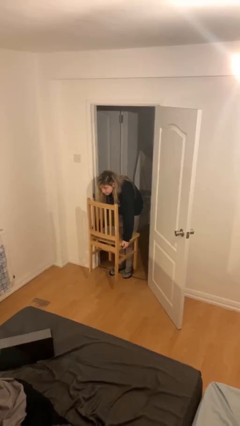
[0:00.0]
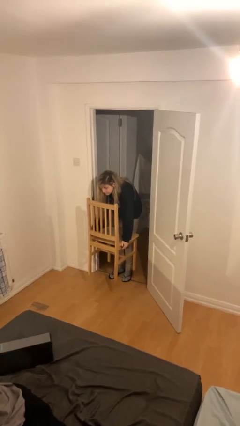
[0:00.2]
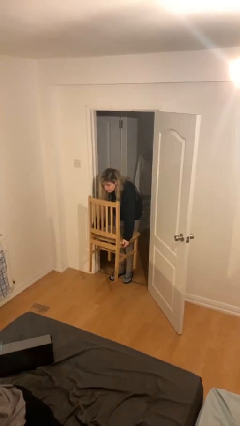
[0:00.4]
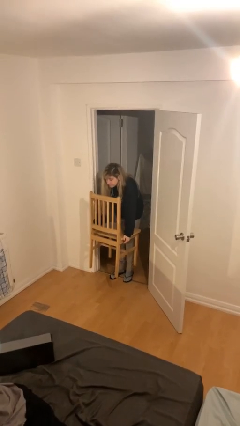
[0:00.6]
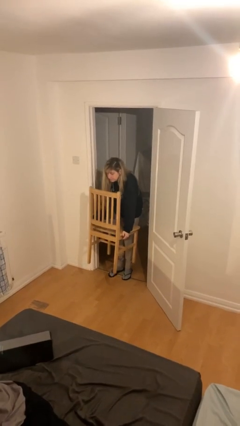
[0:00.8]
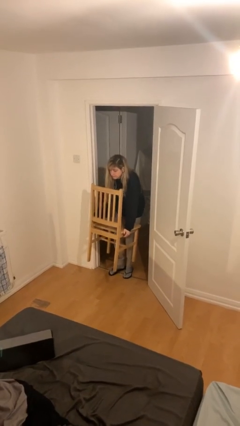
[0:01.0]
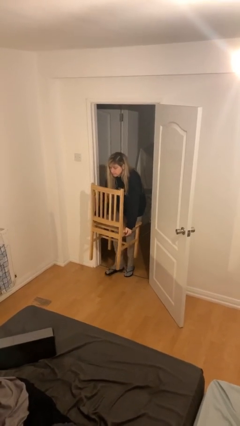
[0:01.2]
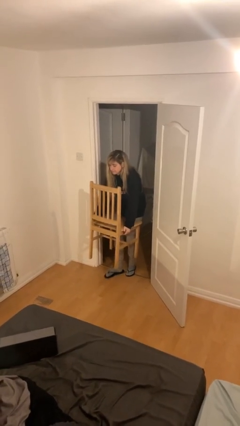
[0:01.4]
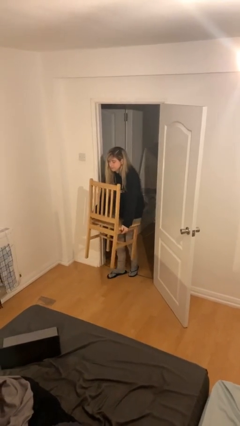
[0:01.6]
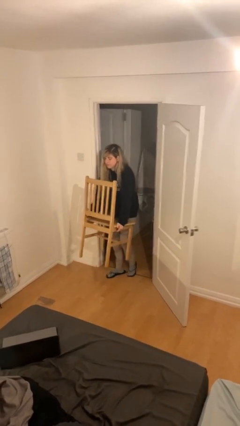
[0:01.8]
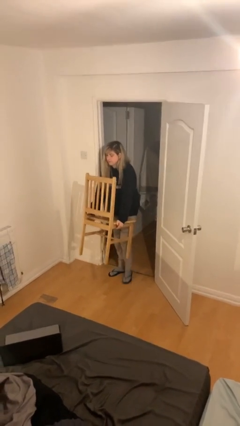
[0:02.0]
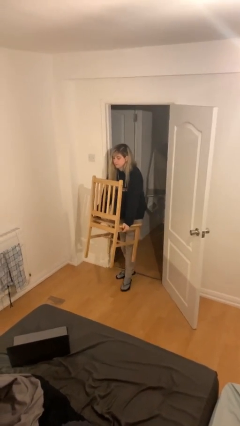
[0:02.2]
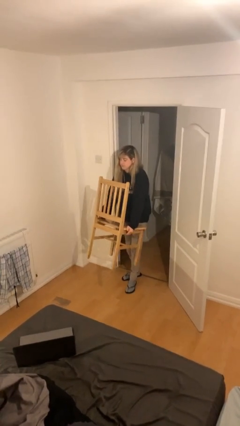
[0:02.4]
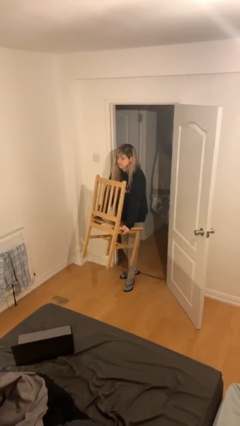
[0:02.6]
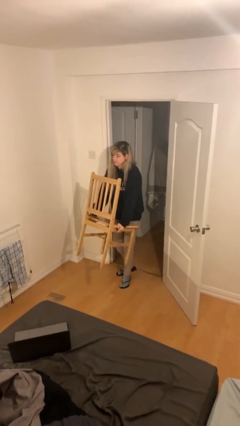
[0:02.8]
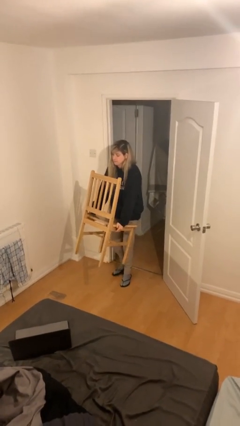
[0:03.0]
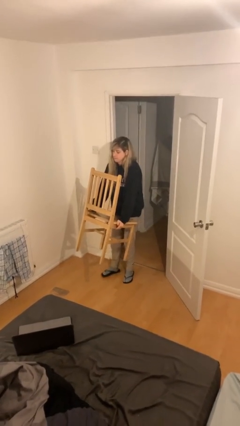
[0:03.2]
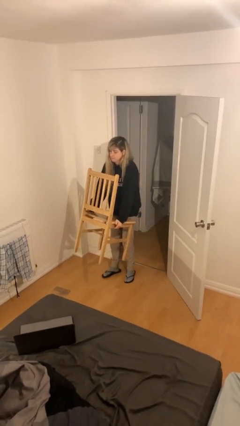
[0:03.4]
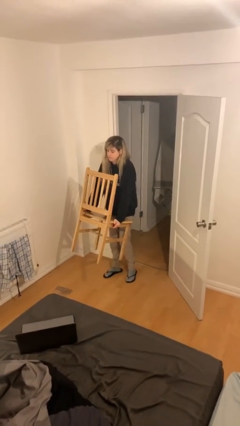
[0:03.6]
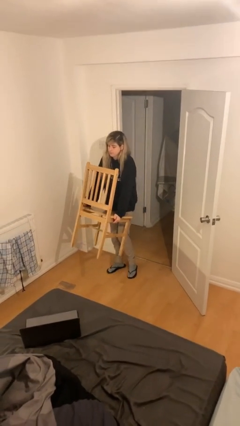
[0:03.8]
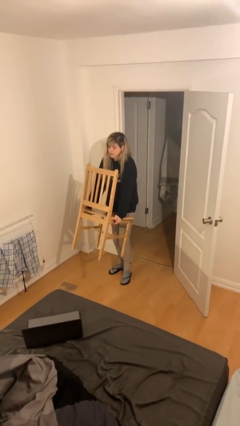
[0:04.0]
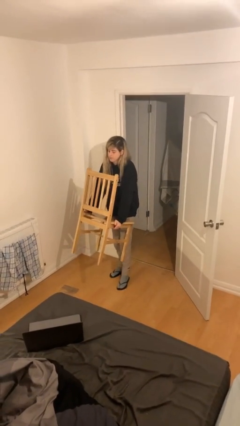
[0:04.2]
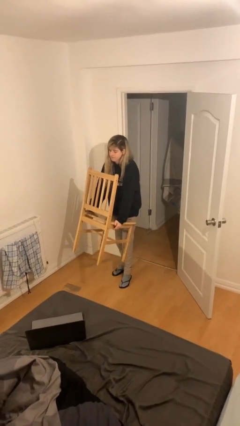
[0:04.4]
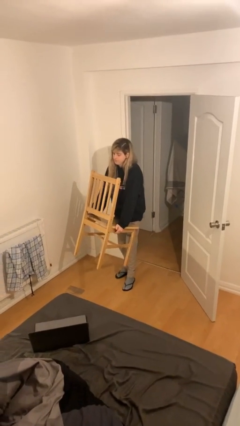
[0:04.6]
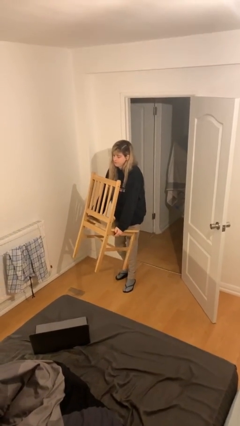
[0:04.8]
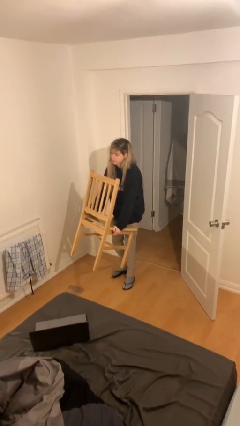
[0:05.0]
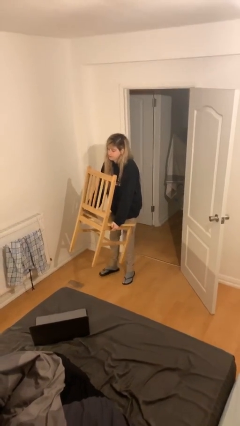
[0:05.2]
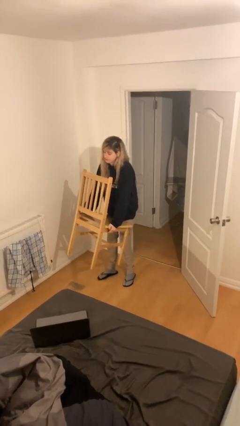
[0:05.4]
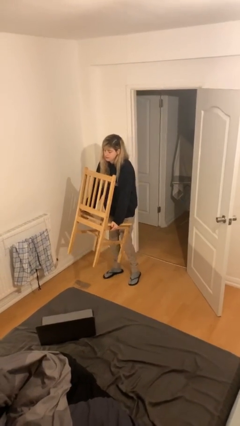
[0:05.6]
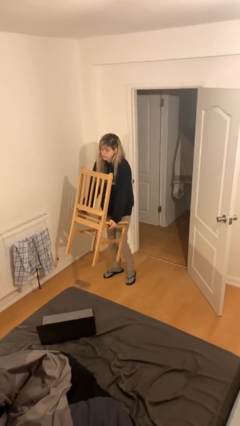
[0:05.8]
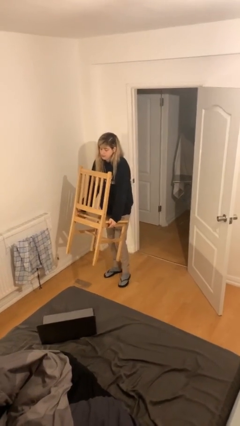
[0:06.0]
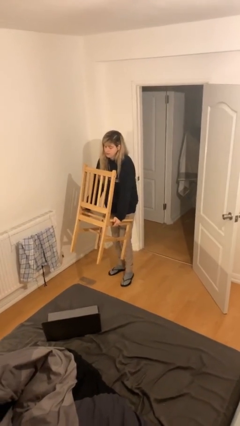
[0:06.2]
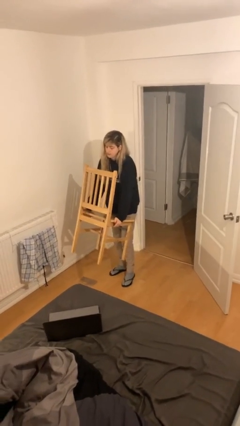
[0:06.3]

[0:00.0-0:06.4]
person carries heavy object

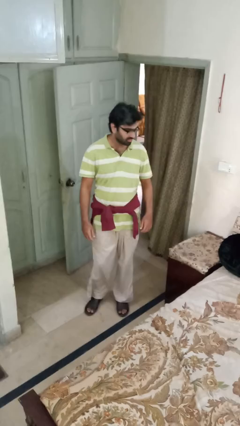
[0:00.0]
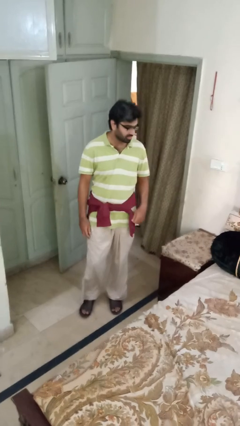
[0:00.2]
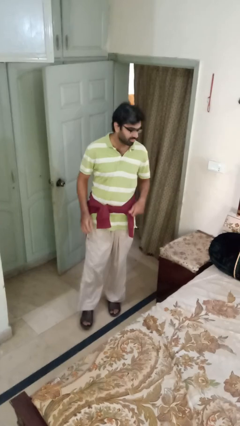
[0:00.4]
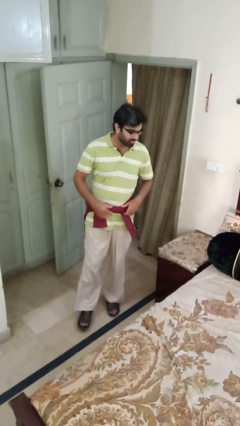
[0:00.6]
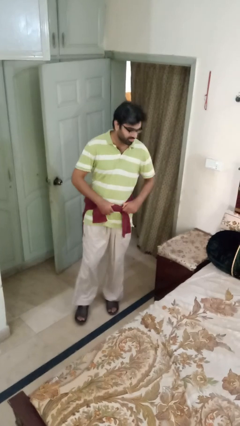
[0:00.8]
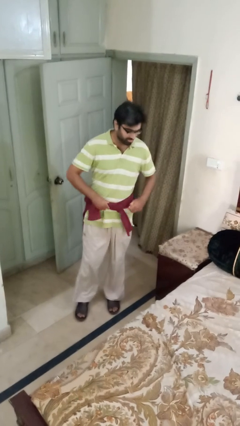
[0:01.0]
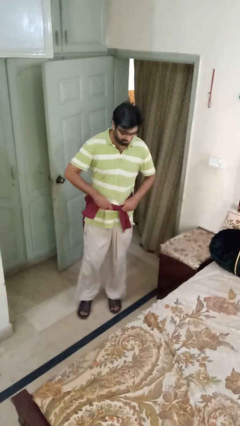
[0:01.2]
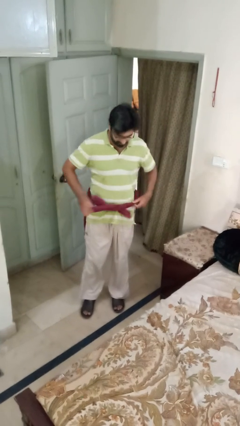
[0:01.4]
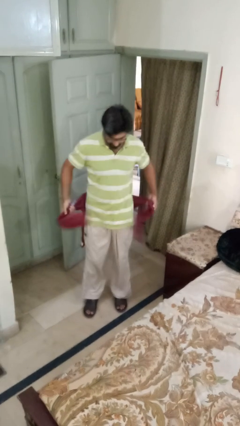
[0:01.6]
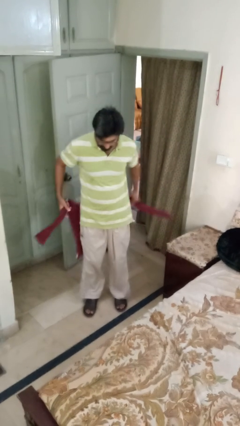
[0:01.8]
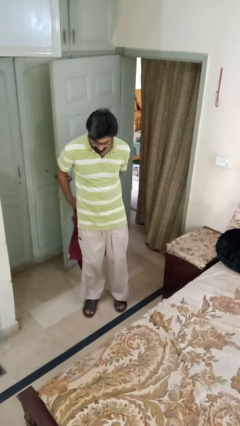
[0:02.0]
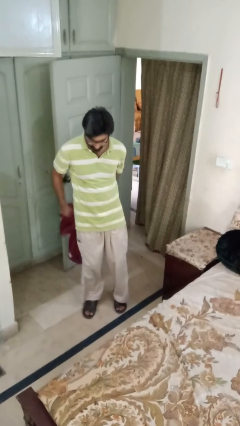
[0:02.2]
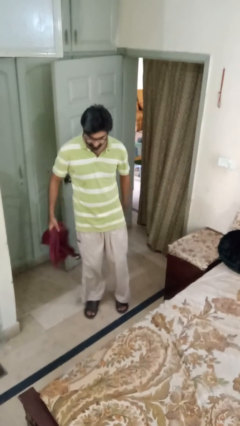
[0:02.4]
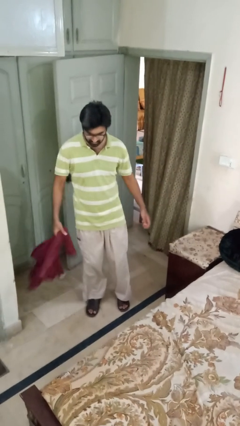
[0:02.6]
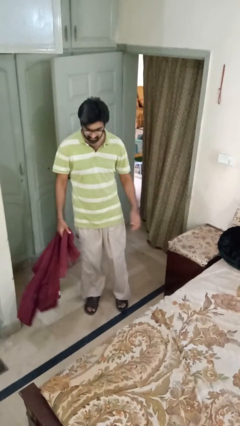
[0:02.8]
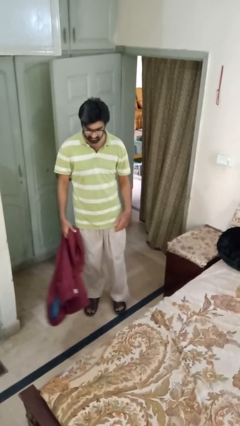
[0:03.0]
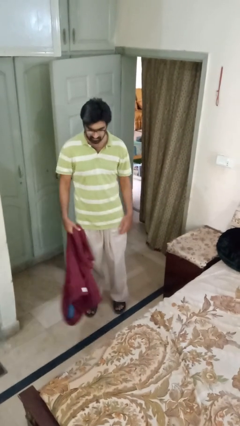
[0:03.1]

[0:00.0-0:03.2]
person unties jacket around waist

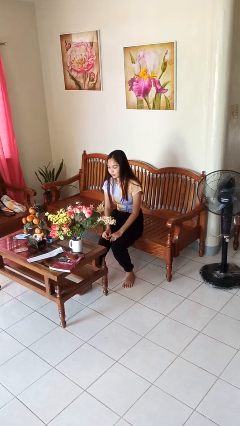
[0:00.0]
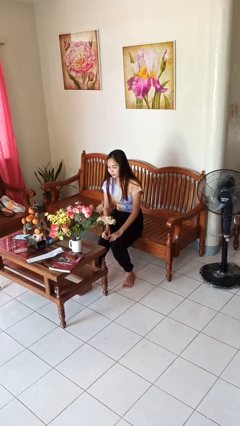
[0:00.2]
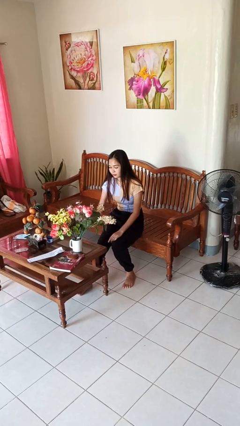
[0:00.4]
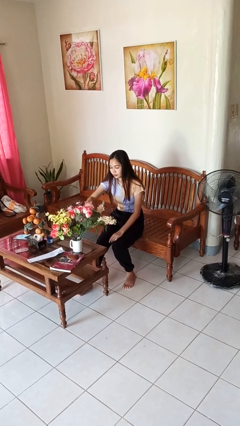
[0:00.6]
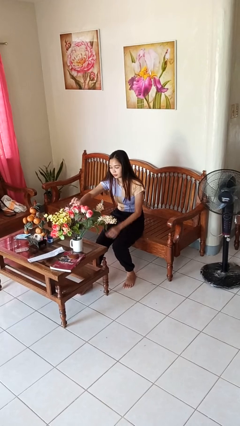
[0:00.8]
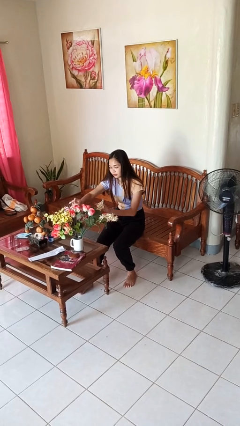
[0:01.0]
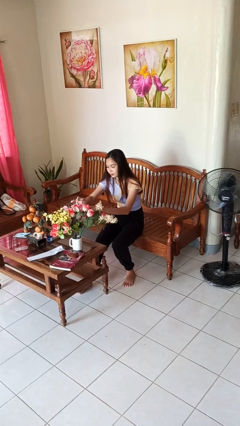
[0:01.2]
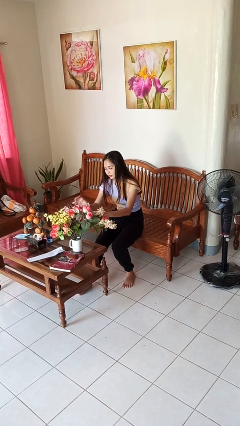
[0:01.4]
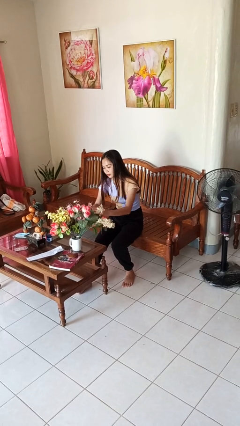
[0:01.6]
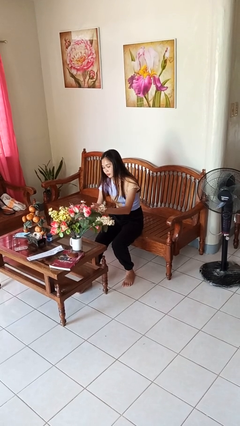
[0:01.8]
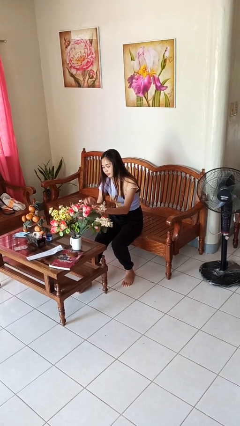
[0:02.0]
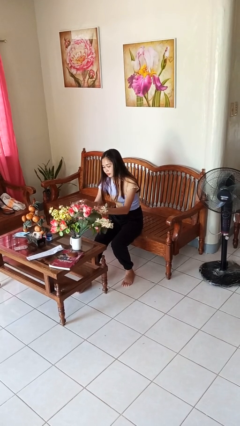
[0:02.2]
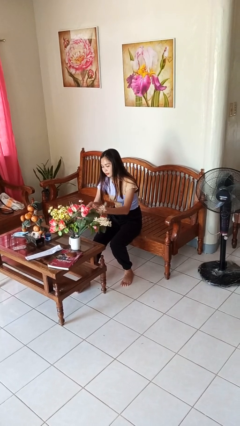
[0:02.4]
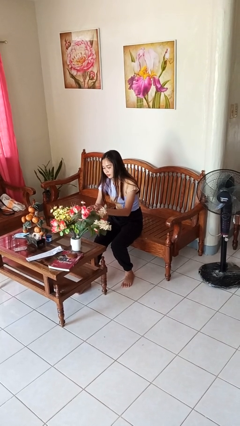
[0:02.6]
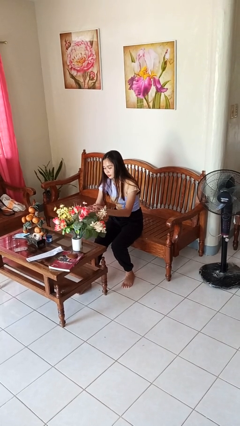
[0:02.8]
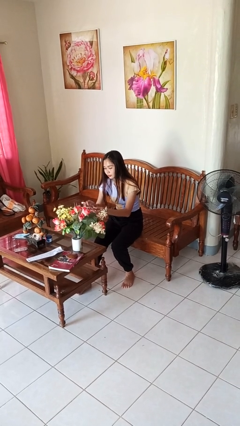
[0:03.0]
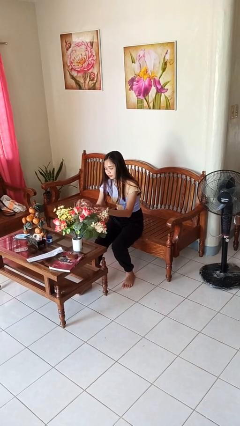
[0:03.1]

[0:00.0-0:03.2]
person arranges flowers in vase

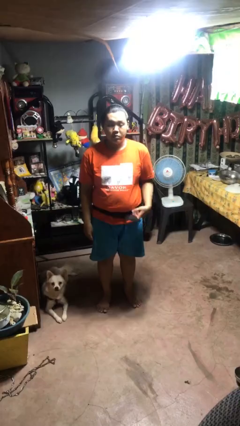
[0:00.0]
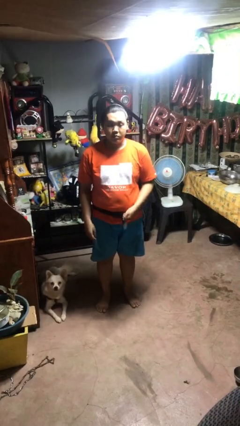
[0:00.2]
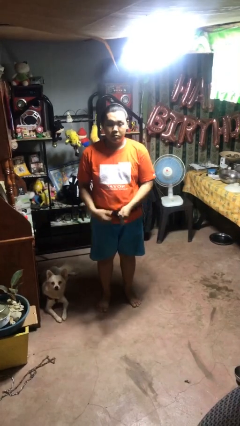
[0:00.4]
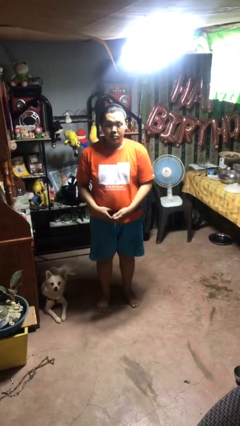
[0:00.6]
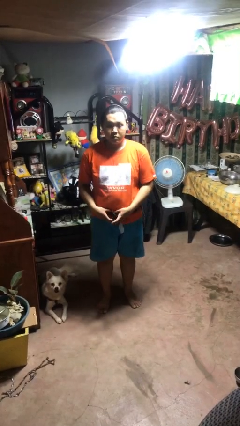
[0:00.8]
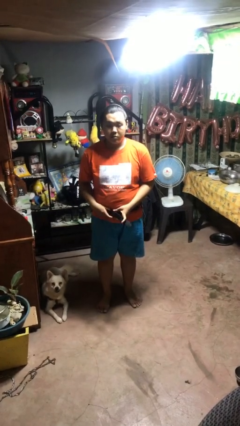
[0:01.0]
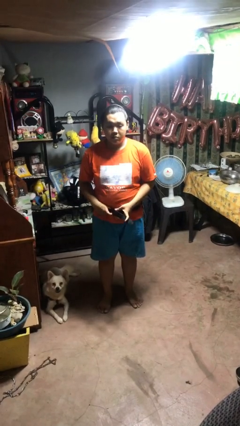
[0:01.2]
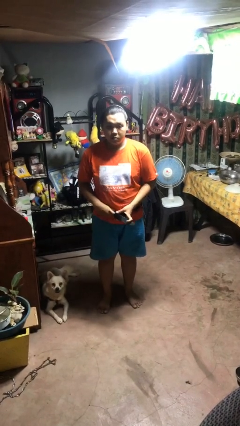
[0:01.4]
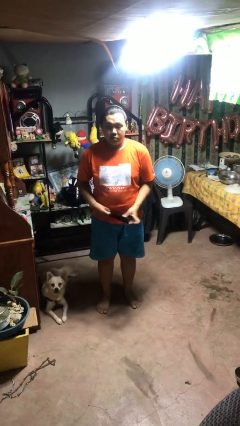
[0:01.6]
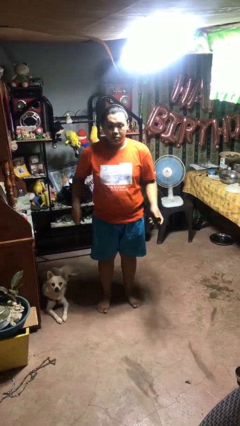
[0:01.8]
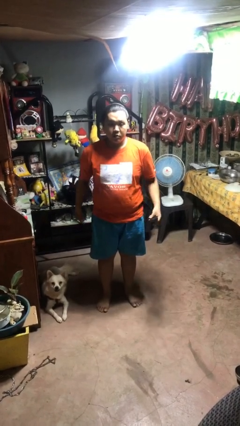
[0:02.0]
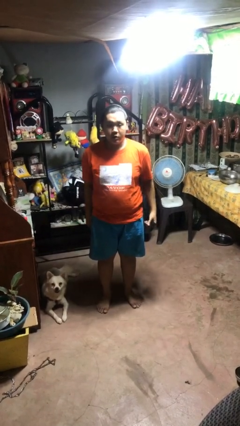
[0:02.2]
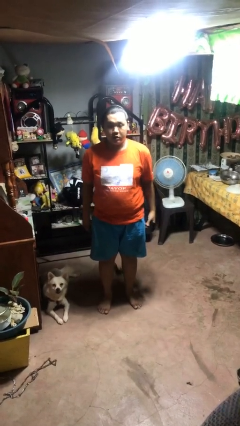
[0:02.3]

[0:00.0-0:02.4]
person takes off belt

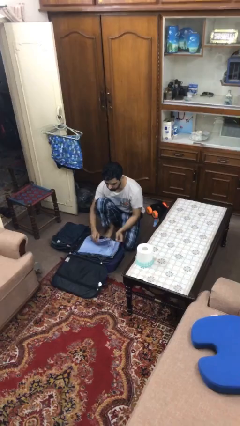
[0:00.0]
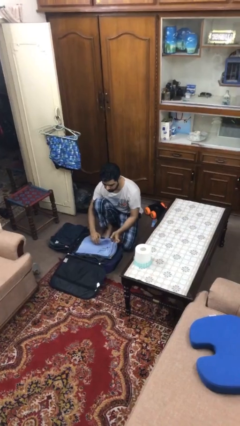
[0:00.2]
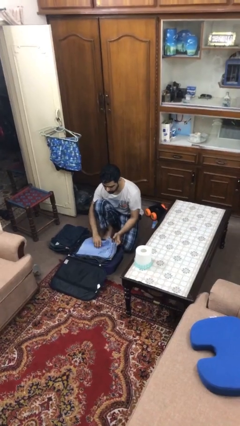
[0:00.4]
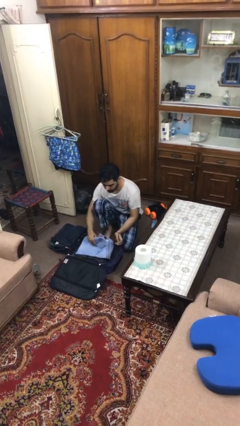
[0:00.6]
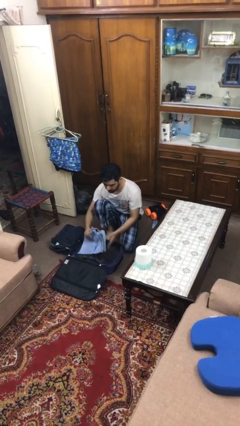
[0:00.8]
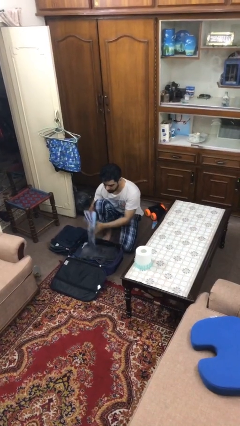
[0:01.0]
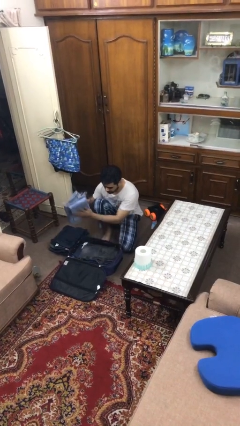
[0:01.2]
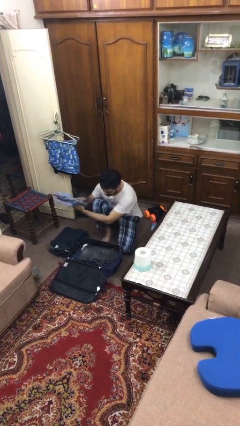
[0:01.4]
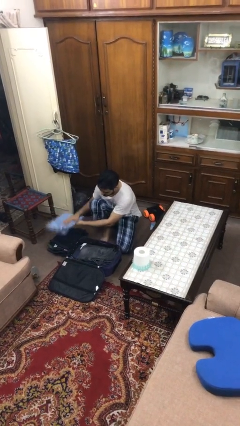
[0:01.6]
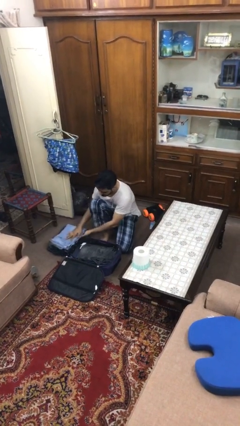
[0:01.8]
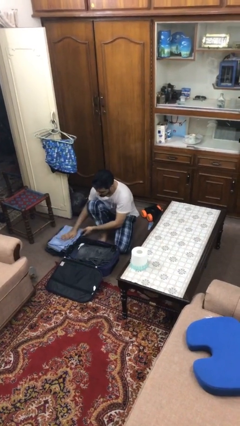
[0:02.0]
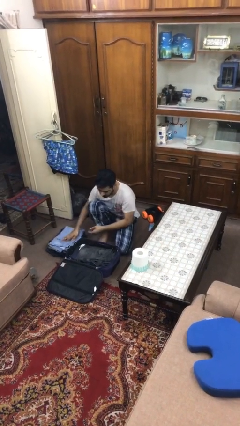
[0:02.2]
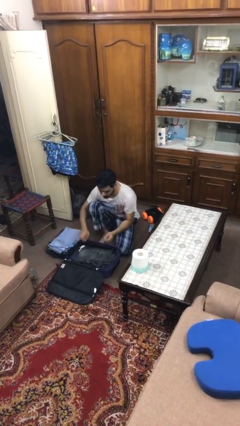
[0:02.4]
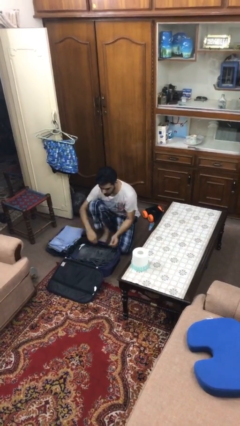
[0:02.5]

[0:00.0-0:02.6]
person unloads clothes from suitcase
